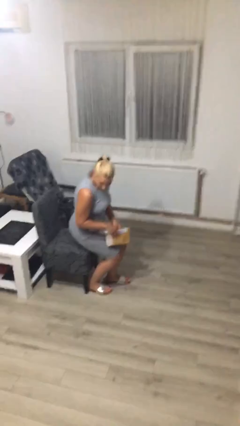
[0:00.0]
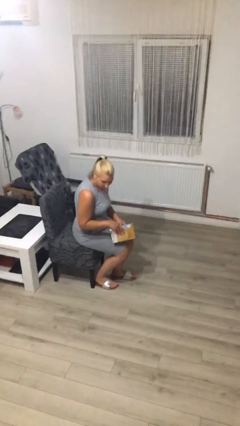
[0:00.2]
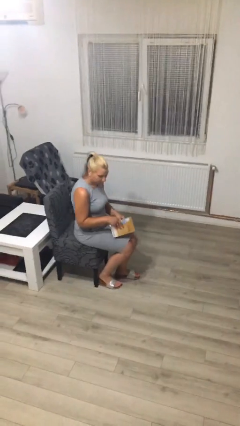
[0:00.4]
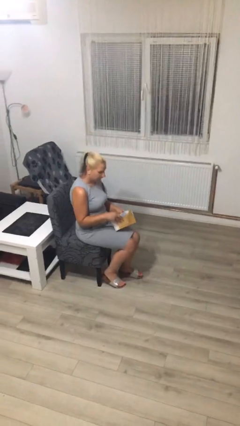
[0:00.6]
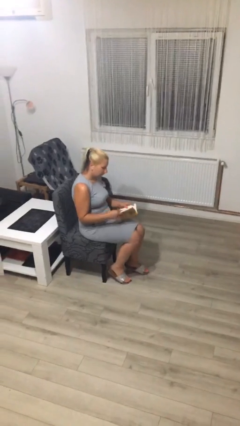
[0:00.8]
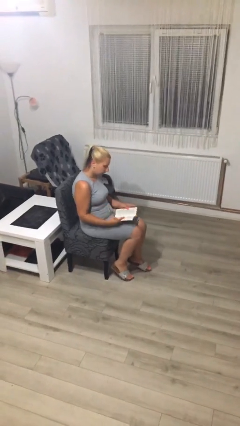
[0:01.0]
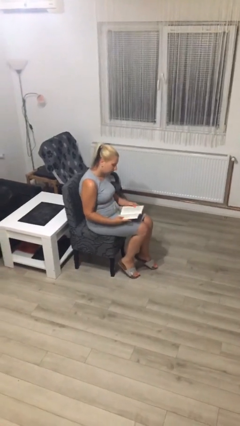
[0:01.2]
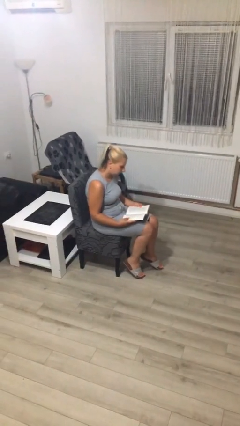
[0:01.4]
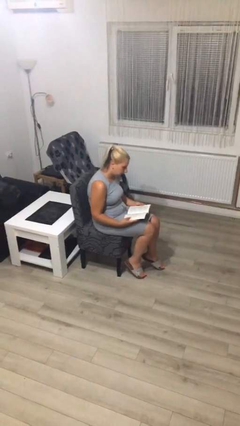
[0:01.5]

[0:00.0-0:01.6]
person sits down

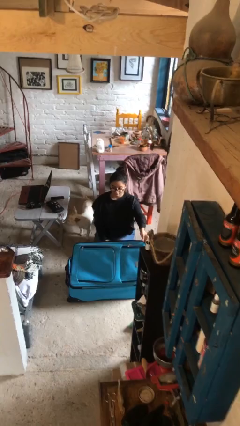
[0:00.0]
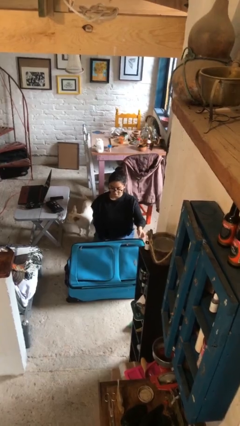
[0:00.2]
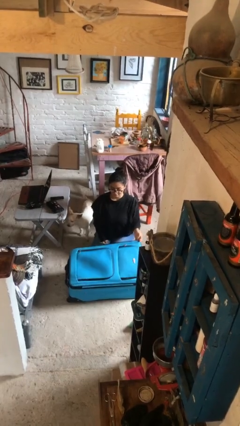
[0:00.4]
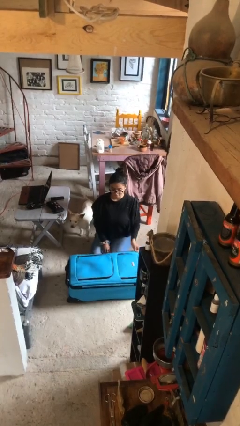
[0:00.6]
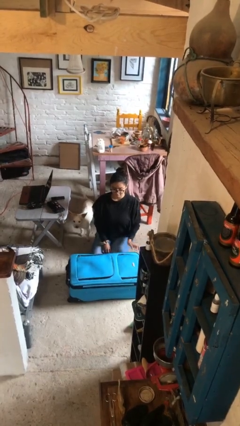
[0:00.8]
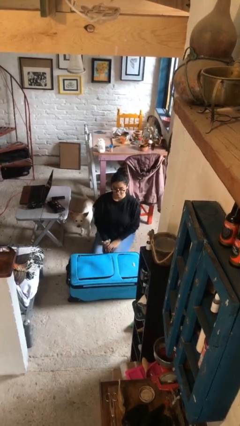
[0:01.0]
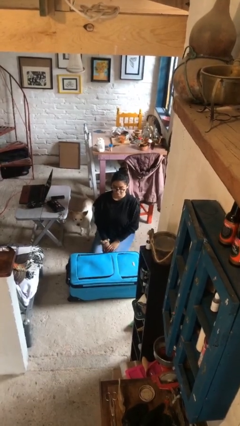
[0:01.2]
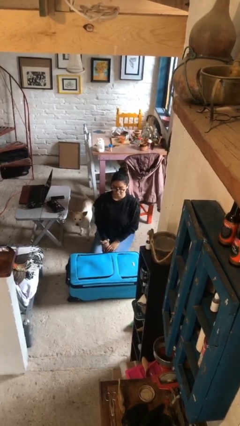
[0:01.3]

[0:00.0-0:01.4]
person closes suitcase

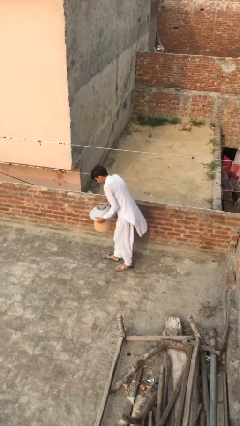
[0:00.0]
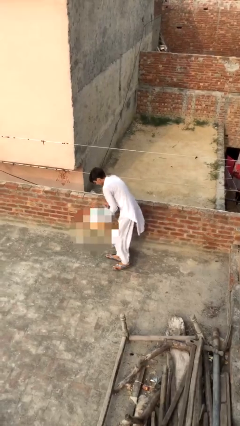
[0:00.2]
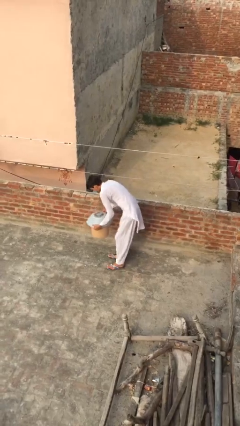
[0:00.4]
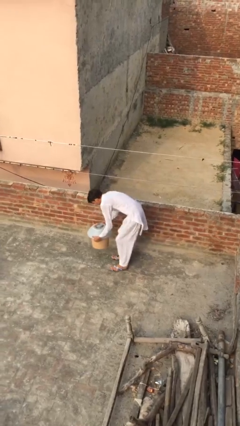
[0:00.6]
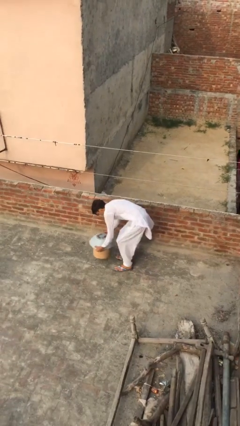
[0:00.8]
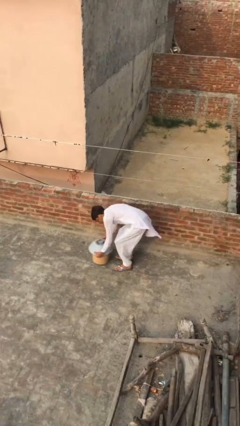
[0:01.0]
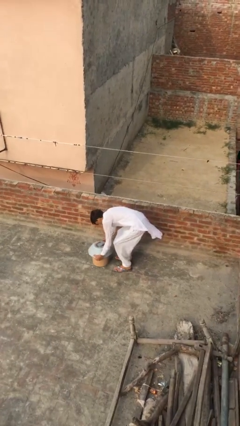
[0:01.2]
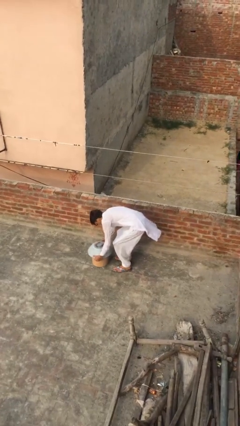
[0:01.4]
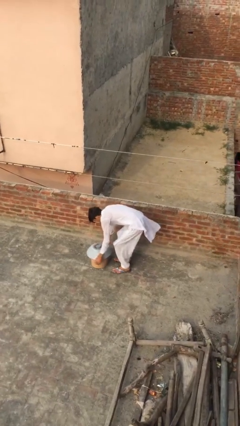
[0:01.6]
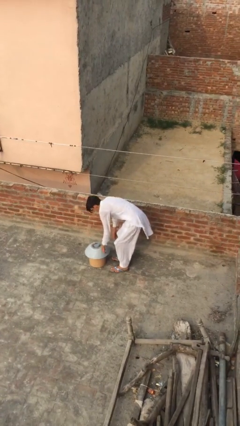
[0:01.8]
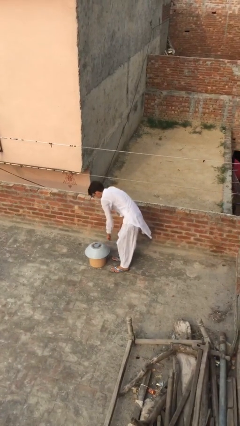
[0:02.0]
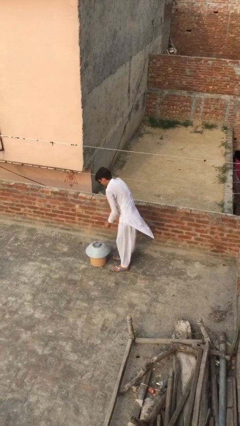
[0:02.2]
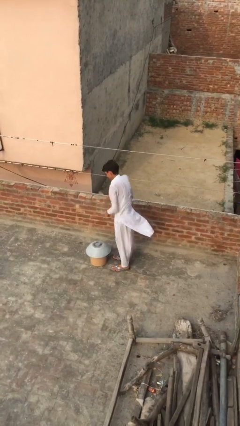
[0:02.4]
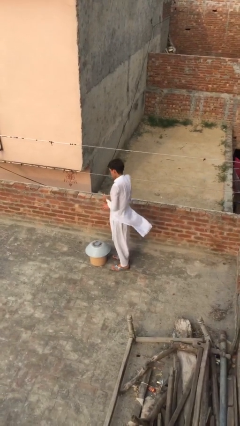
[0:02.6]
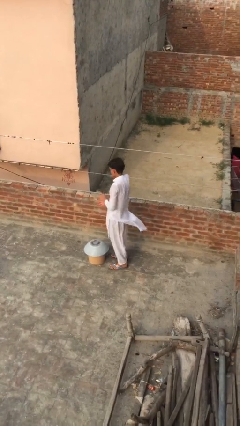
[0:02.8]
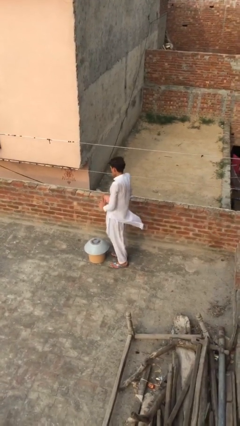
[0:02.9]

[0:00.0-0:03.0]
person puts down object on floor

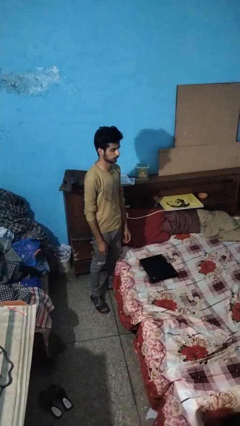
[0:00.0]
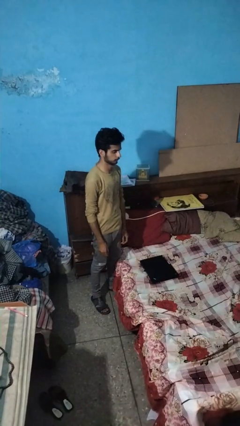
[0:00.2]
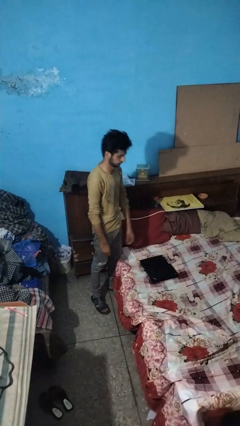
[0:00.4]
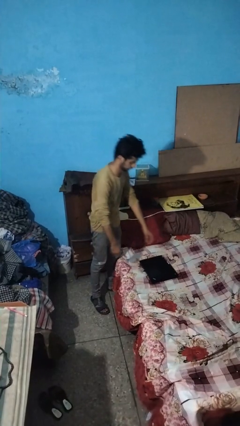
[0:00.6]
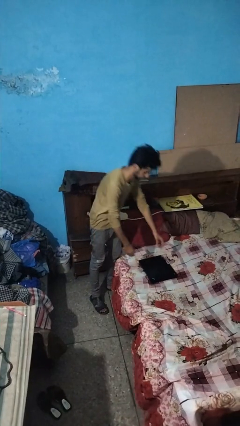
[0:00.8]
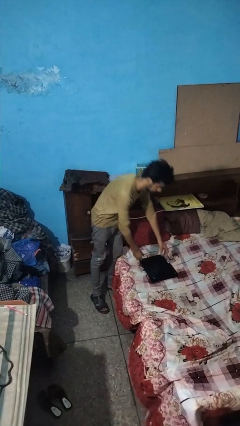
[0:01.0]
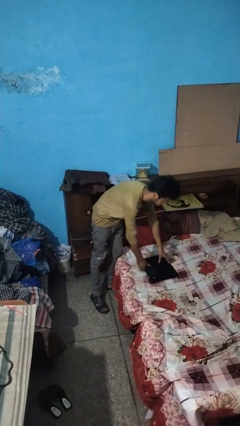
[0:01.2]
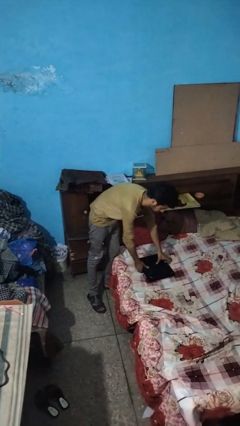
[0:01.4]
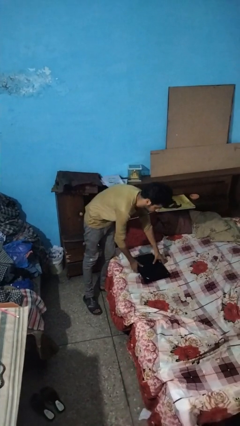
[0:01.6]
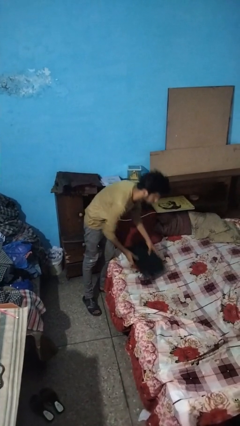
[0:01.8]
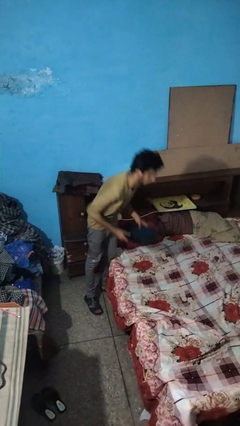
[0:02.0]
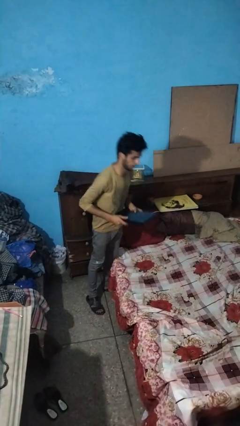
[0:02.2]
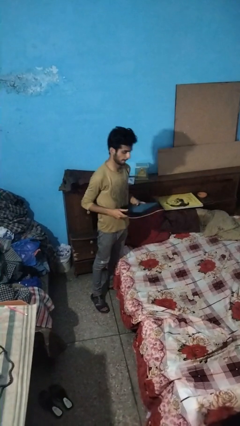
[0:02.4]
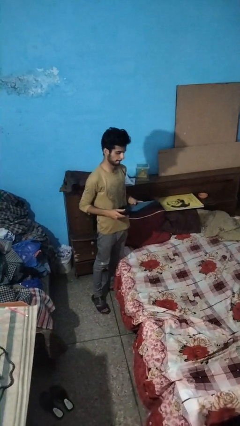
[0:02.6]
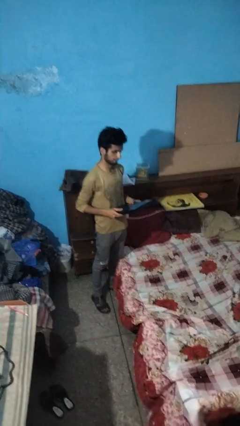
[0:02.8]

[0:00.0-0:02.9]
person picks up object from bed

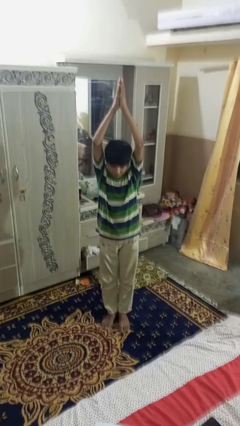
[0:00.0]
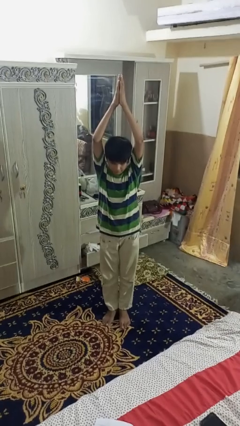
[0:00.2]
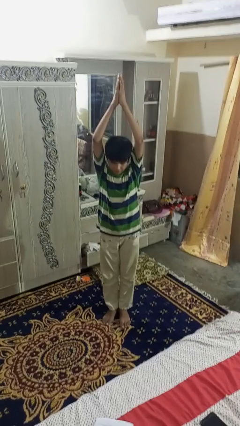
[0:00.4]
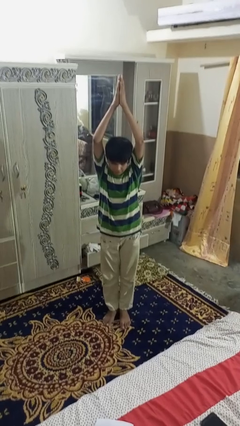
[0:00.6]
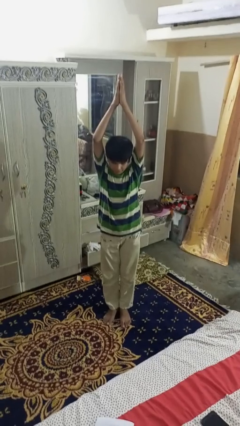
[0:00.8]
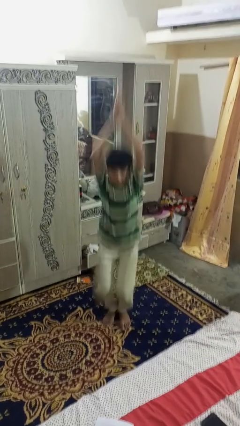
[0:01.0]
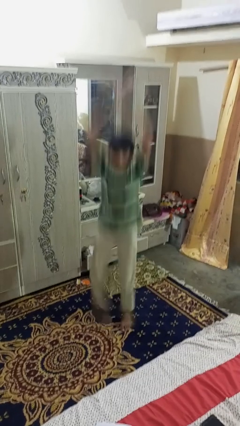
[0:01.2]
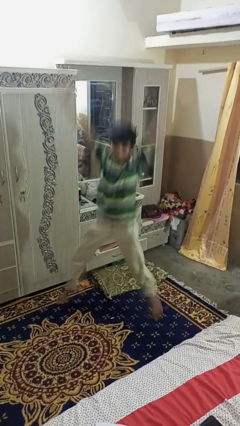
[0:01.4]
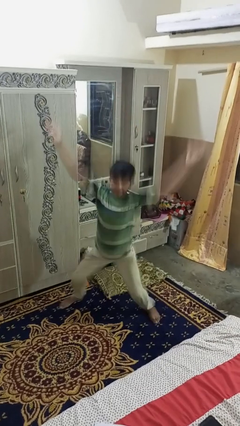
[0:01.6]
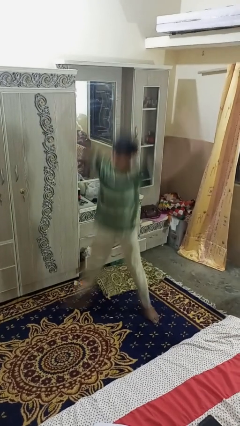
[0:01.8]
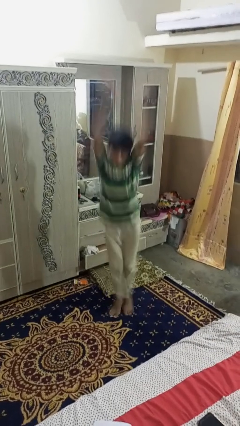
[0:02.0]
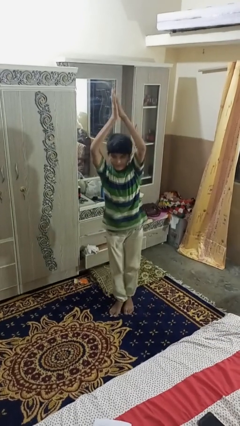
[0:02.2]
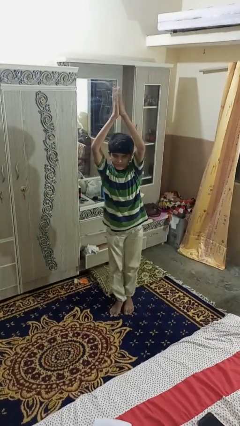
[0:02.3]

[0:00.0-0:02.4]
person exercises with jumping jacks

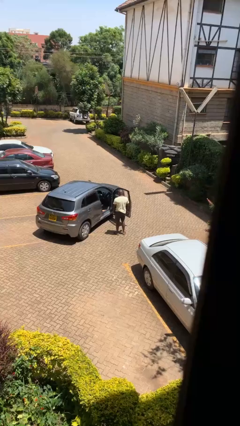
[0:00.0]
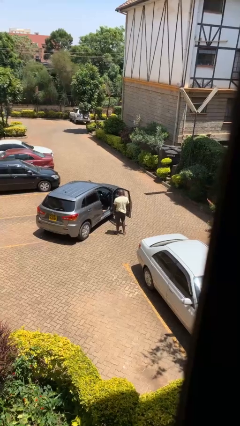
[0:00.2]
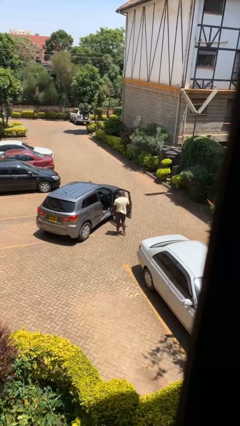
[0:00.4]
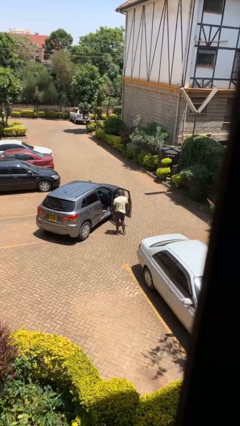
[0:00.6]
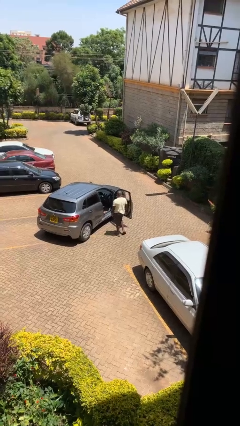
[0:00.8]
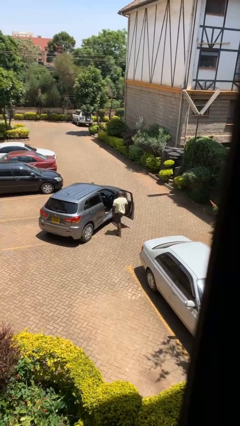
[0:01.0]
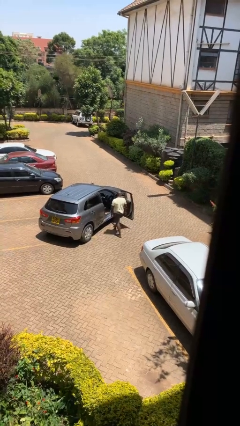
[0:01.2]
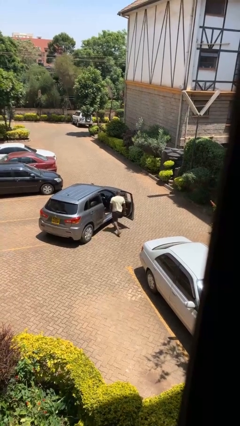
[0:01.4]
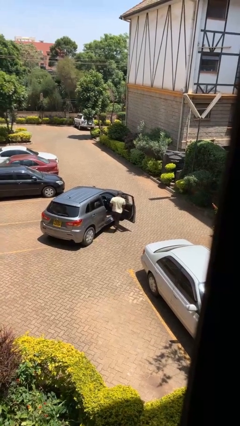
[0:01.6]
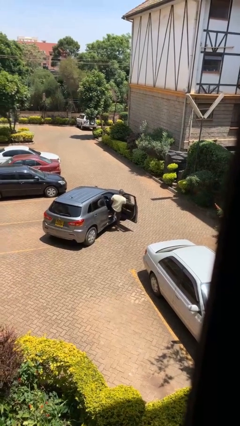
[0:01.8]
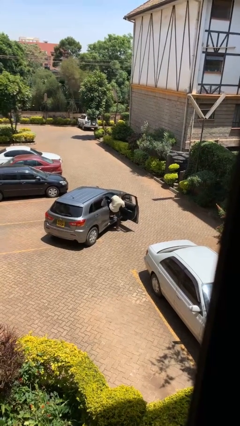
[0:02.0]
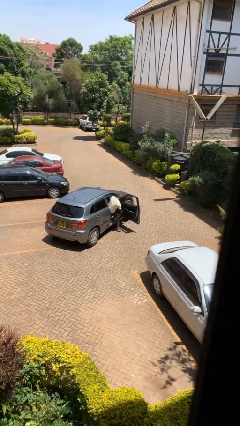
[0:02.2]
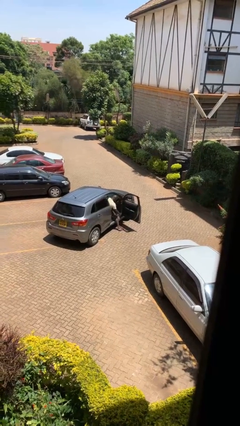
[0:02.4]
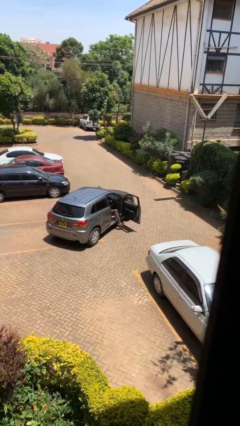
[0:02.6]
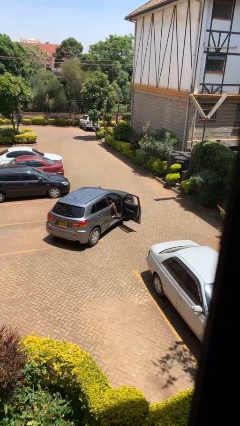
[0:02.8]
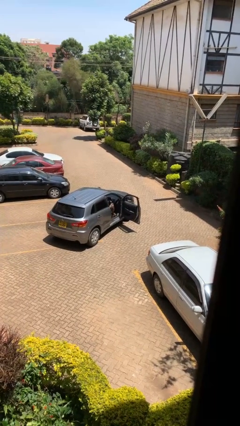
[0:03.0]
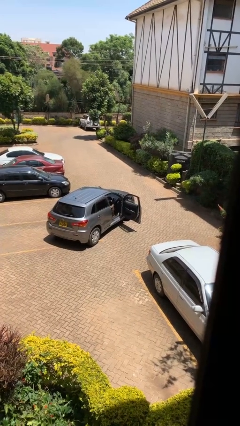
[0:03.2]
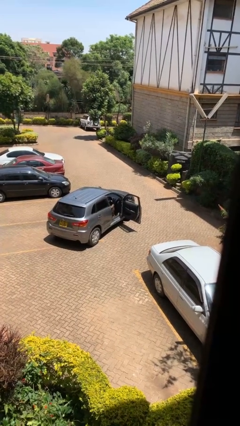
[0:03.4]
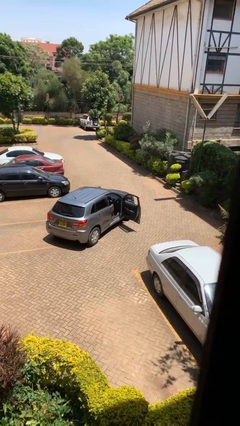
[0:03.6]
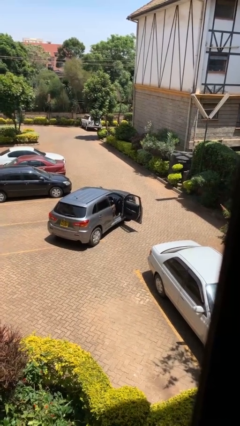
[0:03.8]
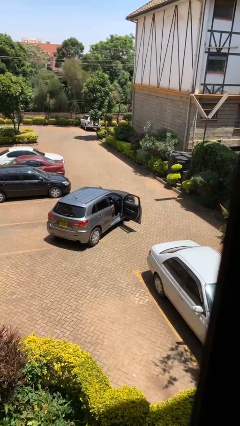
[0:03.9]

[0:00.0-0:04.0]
person enters car

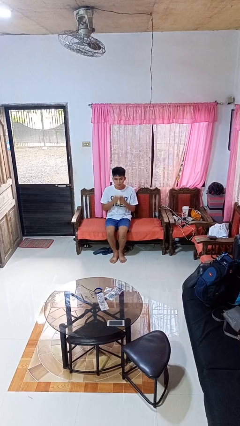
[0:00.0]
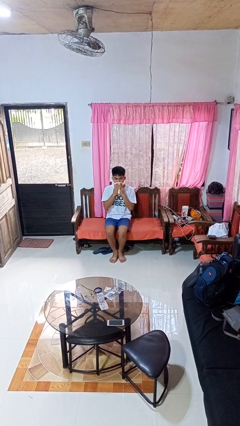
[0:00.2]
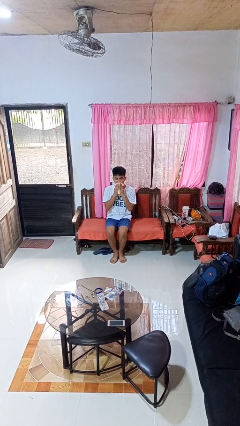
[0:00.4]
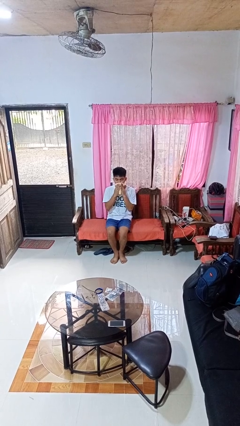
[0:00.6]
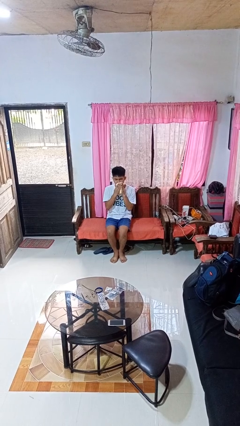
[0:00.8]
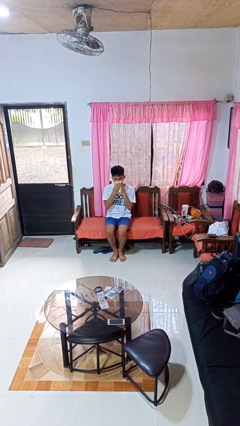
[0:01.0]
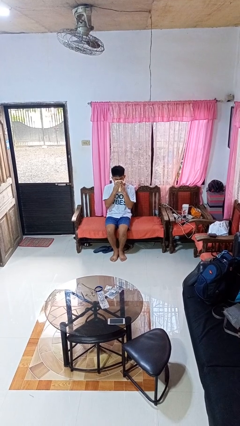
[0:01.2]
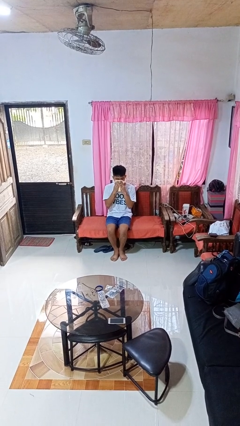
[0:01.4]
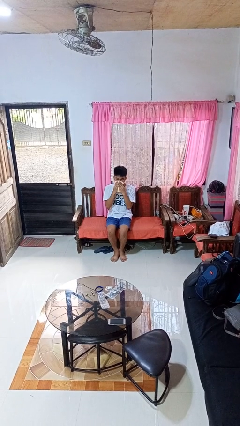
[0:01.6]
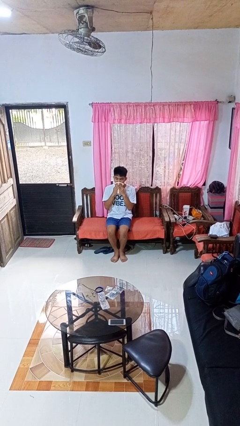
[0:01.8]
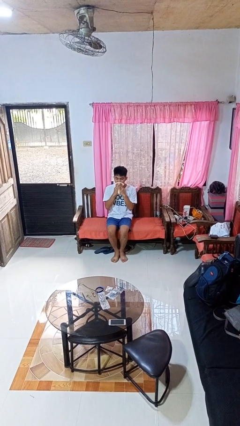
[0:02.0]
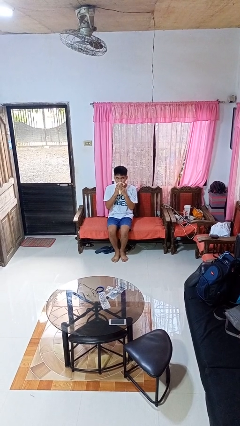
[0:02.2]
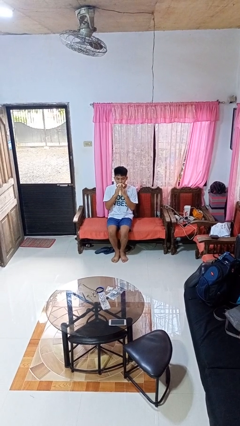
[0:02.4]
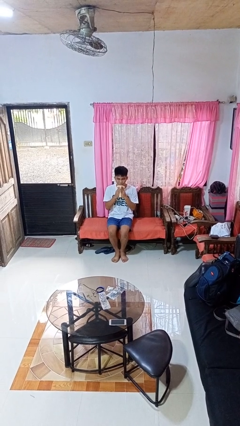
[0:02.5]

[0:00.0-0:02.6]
person wipes mouth with napkin
